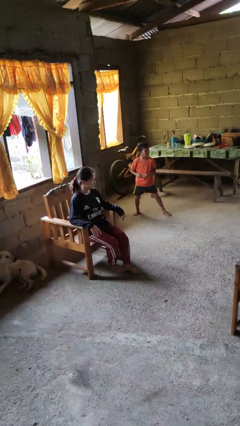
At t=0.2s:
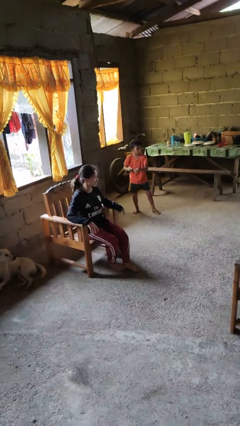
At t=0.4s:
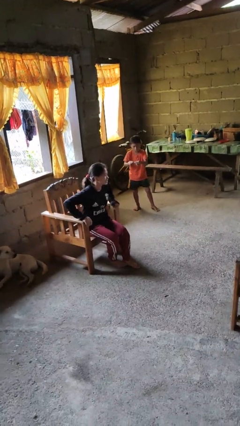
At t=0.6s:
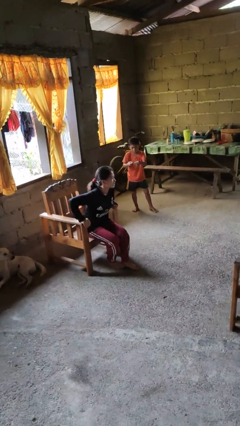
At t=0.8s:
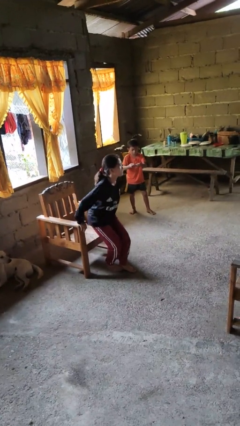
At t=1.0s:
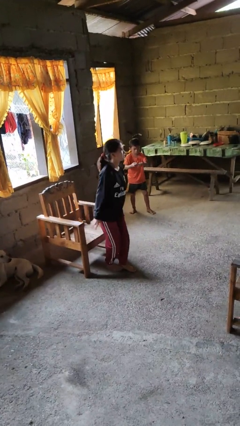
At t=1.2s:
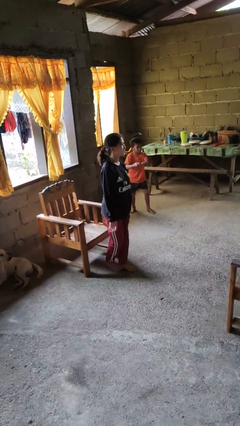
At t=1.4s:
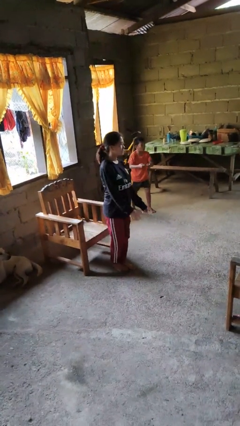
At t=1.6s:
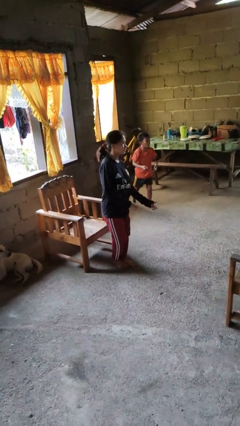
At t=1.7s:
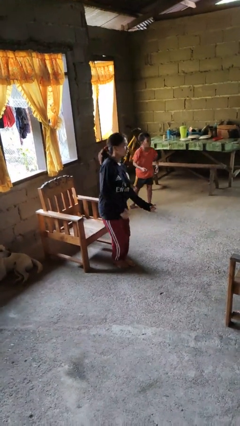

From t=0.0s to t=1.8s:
person stands up from floor

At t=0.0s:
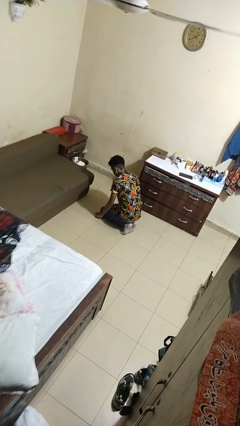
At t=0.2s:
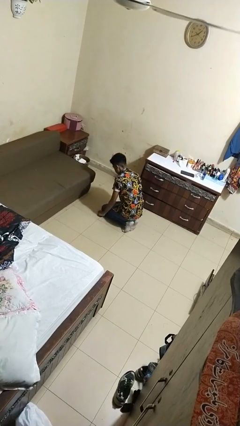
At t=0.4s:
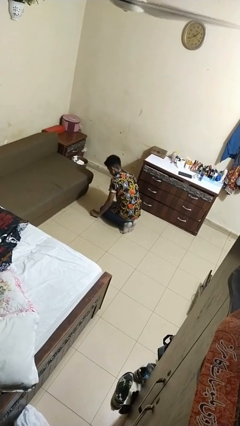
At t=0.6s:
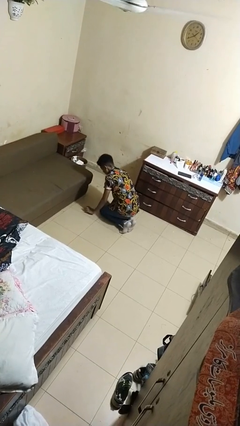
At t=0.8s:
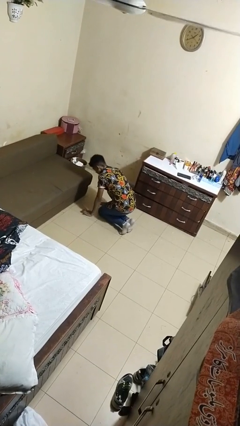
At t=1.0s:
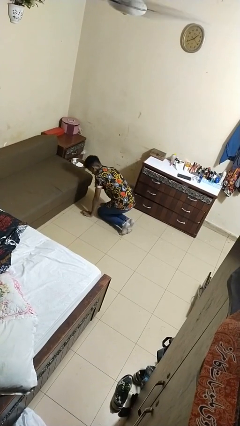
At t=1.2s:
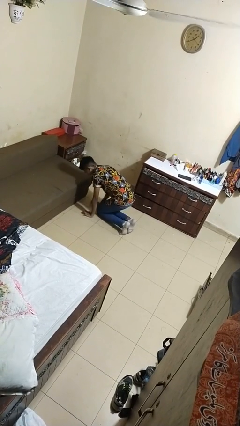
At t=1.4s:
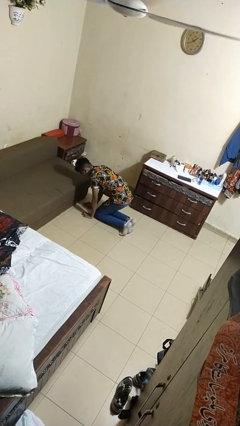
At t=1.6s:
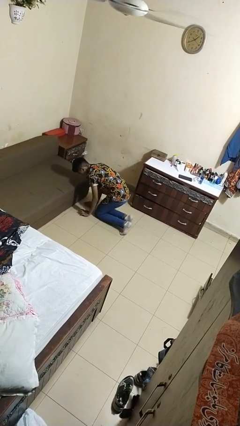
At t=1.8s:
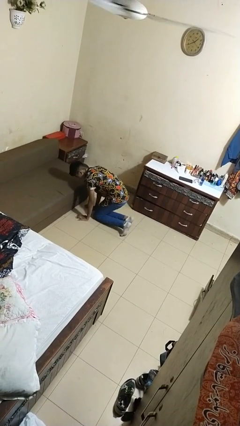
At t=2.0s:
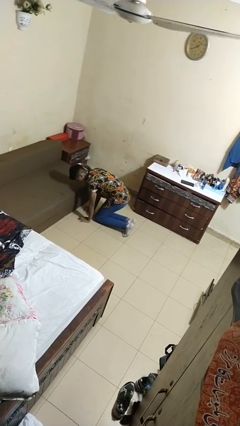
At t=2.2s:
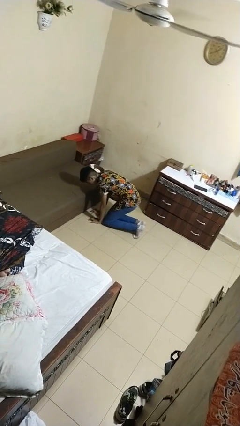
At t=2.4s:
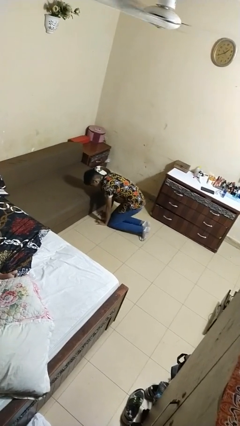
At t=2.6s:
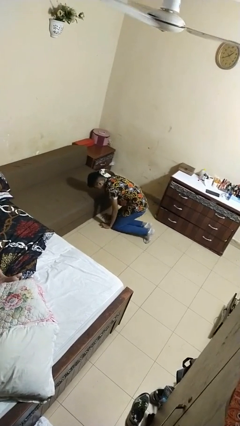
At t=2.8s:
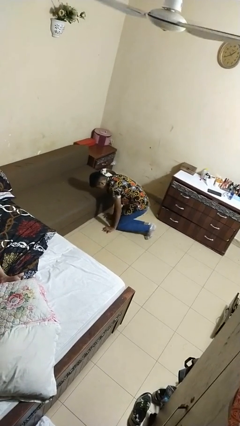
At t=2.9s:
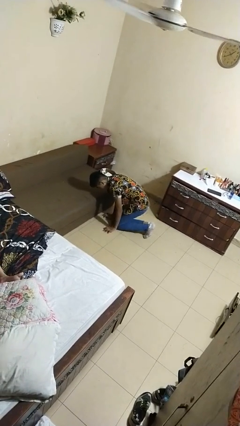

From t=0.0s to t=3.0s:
person crawls

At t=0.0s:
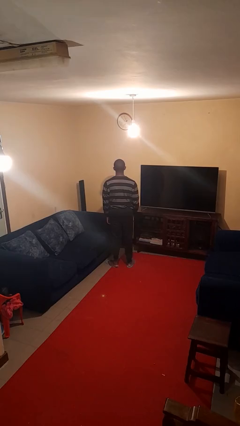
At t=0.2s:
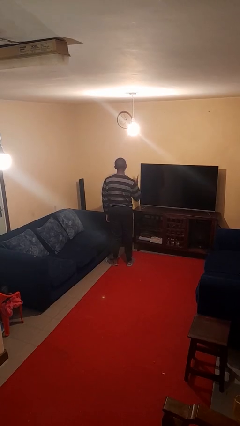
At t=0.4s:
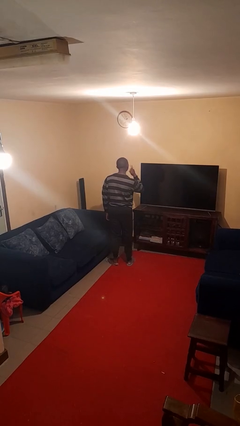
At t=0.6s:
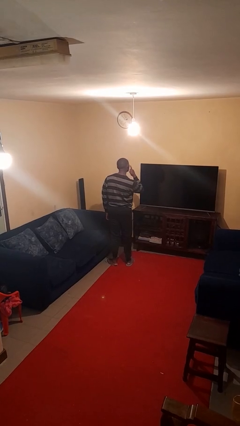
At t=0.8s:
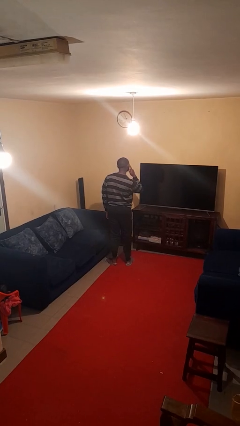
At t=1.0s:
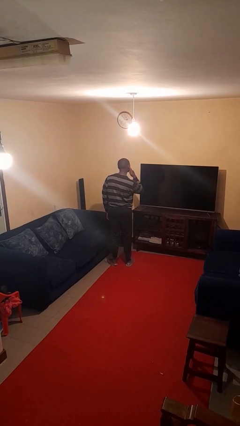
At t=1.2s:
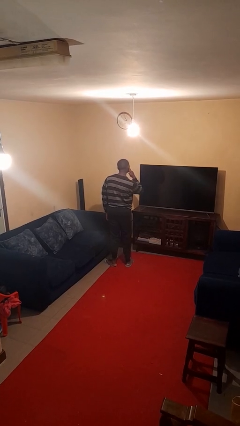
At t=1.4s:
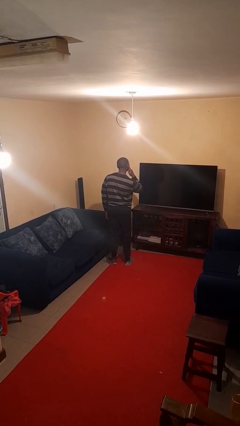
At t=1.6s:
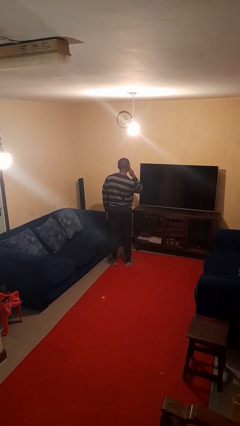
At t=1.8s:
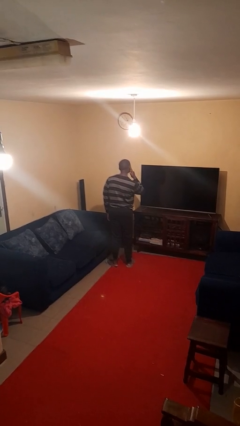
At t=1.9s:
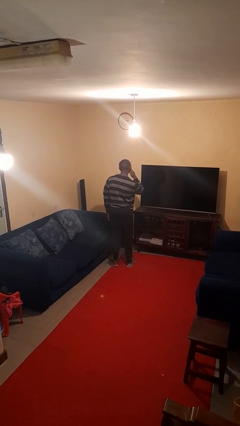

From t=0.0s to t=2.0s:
person gestures listen closely

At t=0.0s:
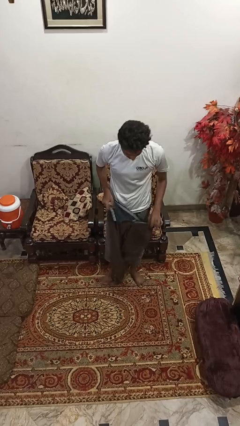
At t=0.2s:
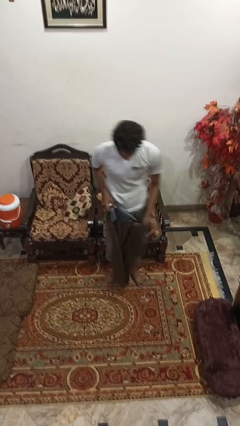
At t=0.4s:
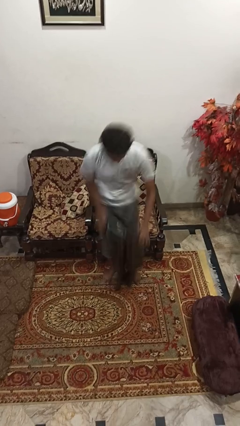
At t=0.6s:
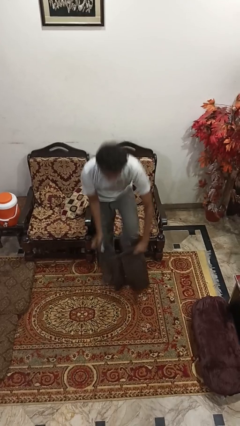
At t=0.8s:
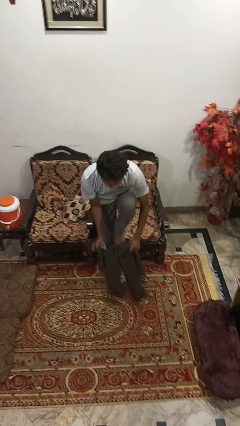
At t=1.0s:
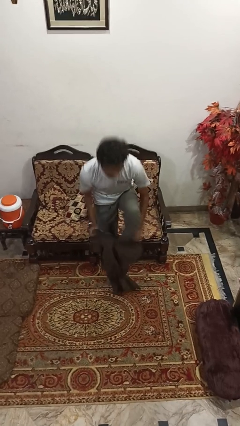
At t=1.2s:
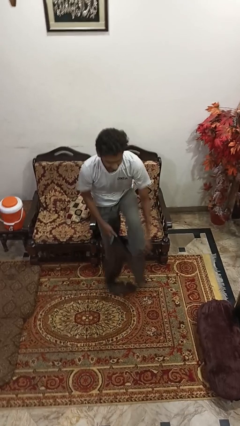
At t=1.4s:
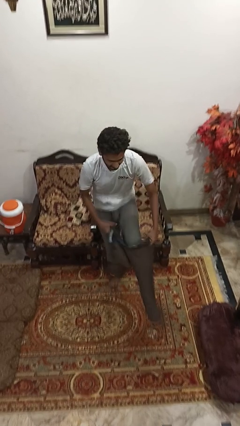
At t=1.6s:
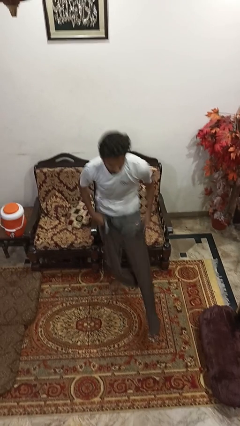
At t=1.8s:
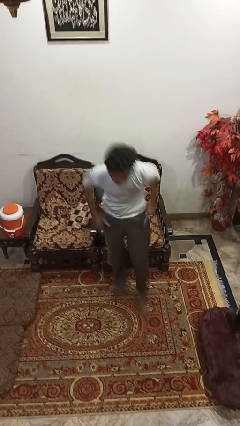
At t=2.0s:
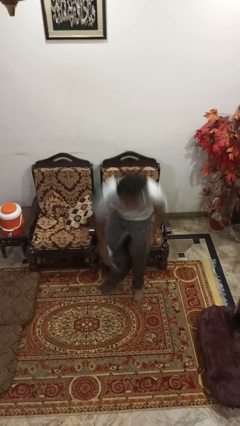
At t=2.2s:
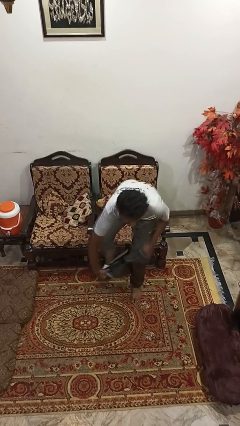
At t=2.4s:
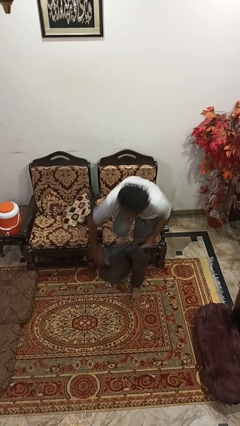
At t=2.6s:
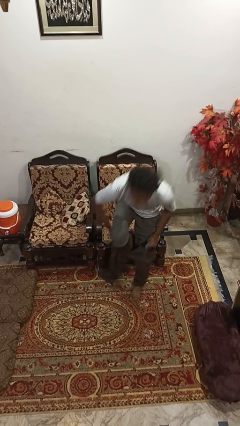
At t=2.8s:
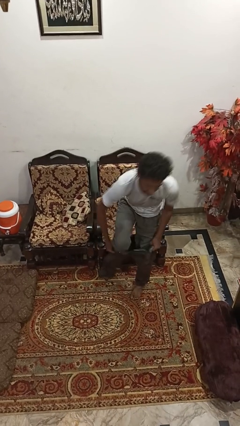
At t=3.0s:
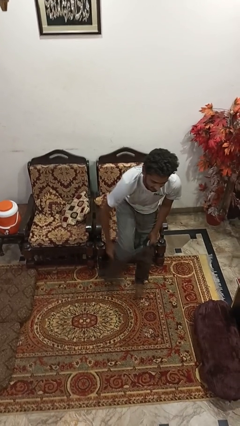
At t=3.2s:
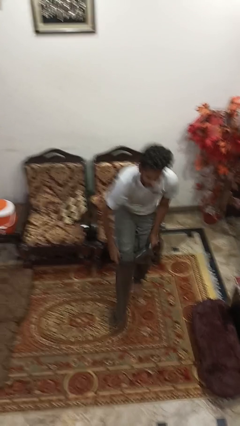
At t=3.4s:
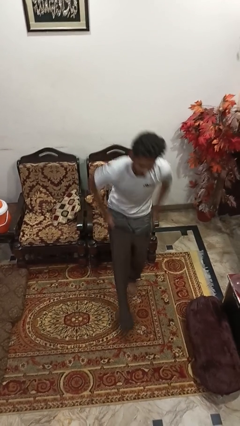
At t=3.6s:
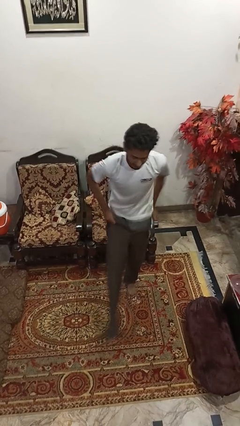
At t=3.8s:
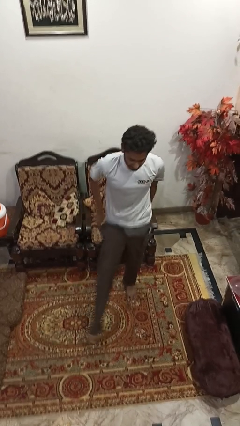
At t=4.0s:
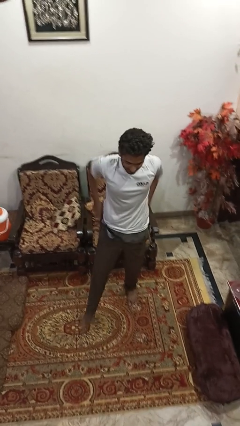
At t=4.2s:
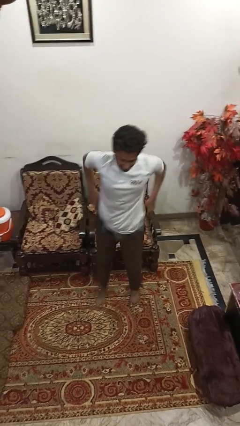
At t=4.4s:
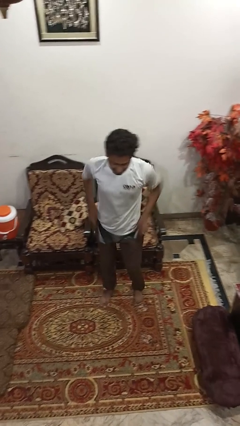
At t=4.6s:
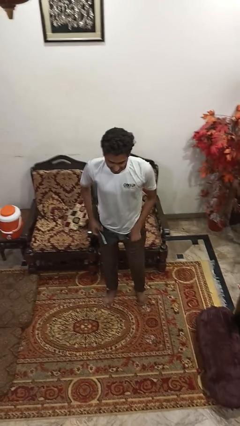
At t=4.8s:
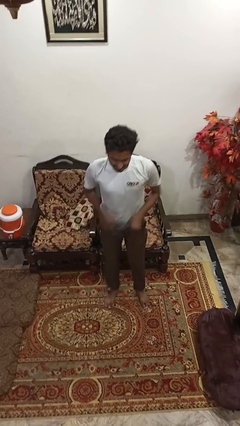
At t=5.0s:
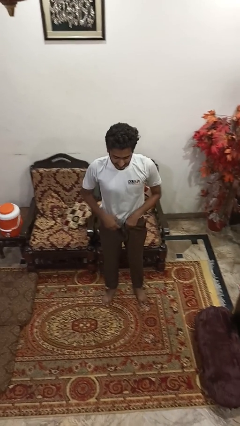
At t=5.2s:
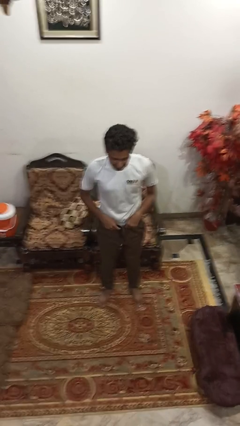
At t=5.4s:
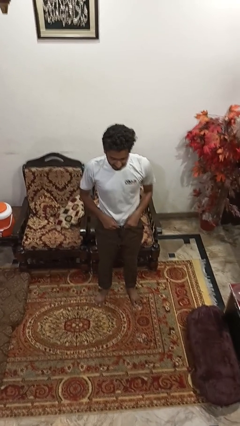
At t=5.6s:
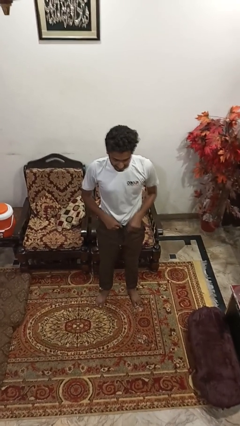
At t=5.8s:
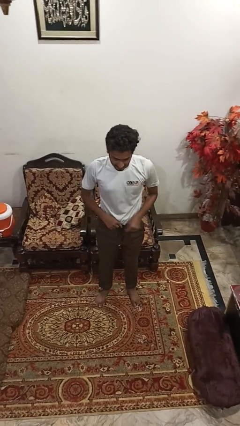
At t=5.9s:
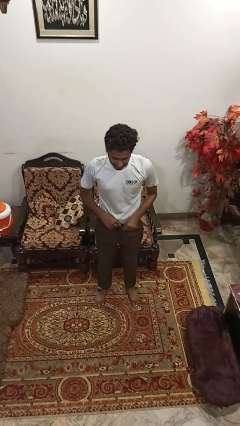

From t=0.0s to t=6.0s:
person puts on pants

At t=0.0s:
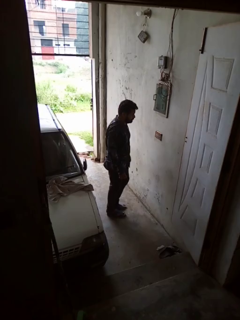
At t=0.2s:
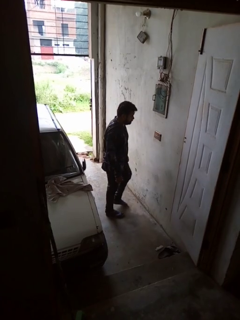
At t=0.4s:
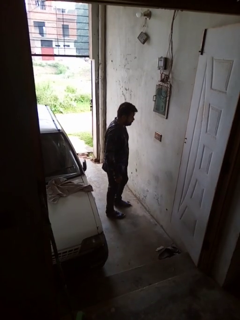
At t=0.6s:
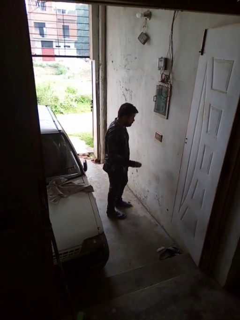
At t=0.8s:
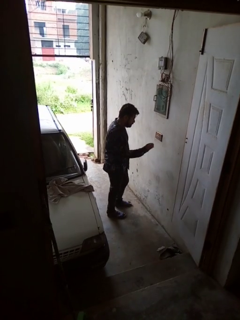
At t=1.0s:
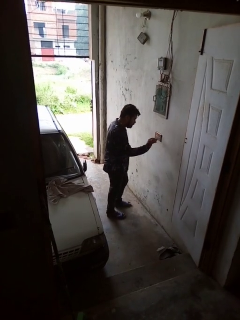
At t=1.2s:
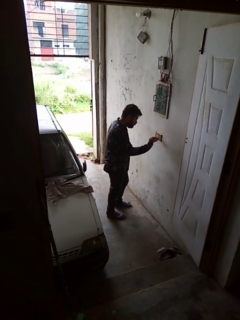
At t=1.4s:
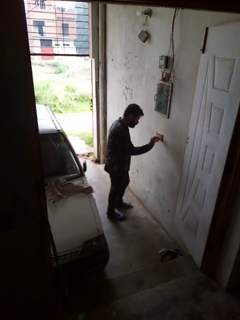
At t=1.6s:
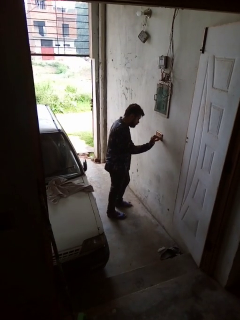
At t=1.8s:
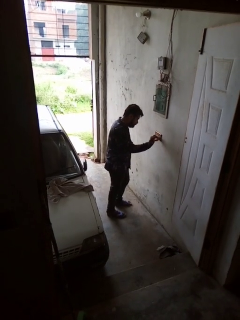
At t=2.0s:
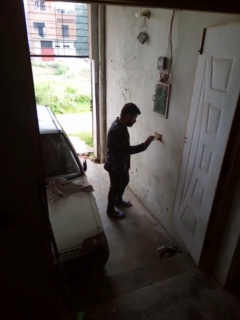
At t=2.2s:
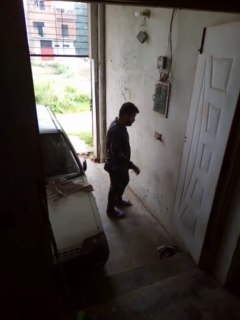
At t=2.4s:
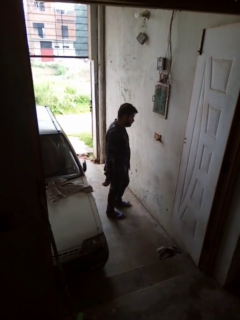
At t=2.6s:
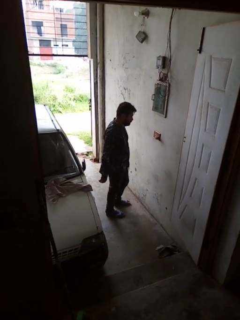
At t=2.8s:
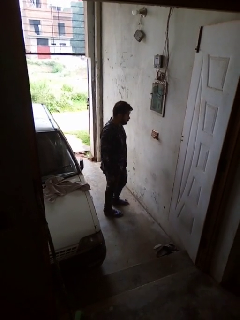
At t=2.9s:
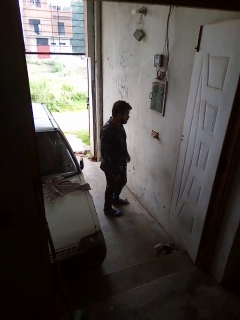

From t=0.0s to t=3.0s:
person plugs into electrical socket

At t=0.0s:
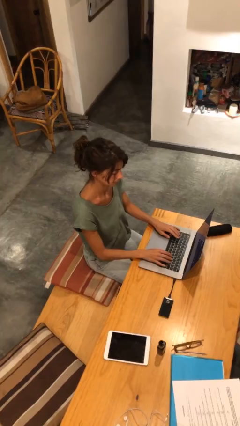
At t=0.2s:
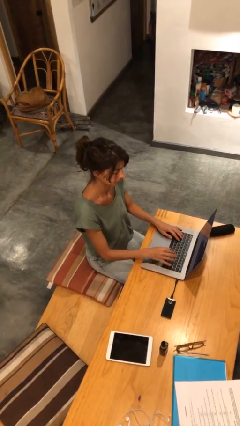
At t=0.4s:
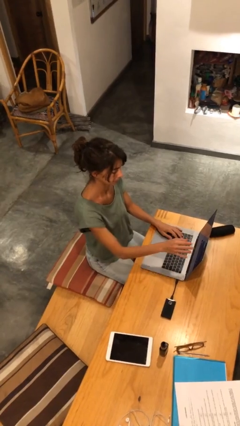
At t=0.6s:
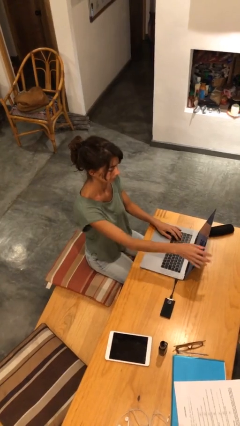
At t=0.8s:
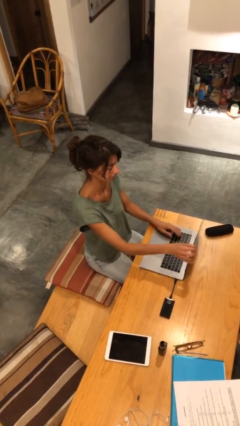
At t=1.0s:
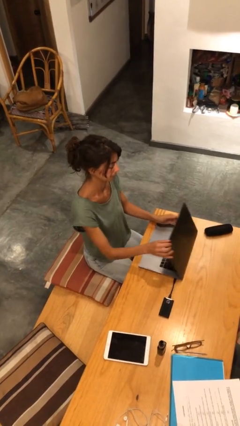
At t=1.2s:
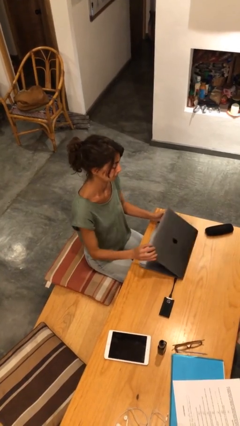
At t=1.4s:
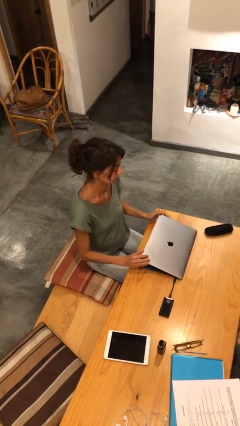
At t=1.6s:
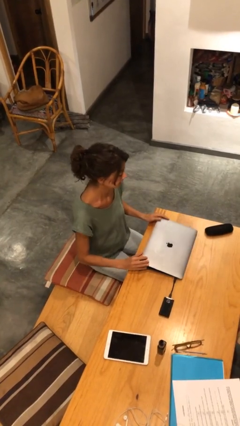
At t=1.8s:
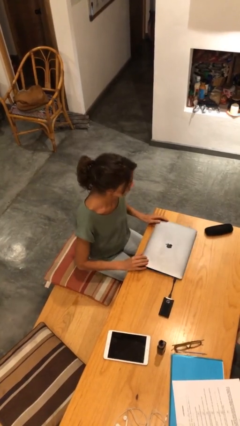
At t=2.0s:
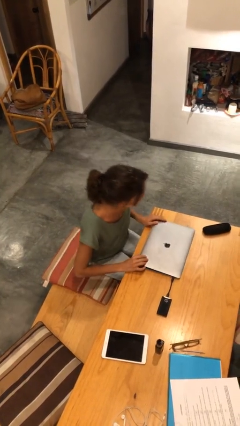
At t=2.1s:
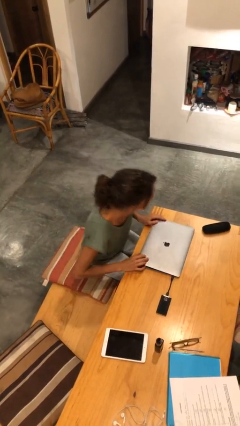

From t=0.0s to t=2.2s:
person closes laptop

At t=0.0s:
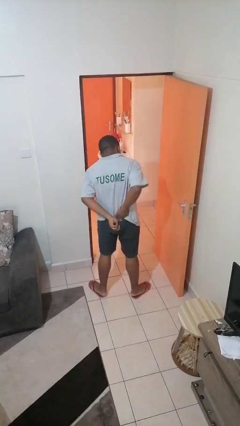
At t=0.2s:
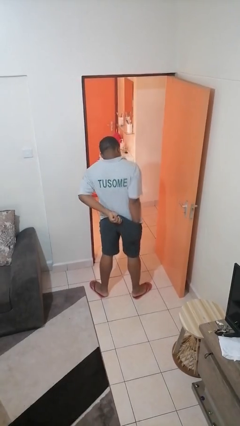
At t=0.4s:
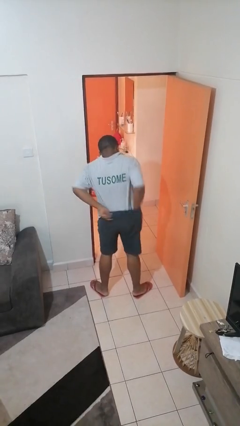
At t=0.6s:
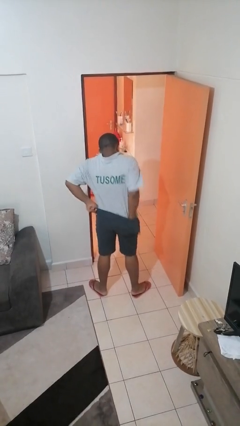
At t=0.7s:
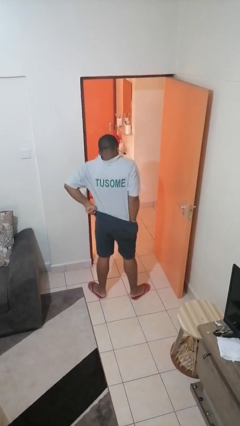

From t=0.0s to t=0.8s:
person untucks shirt
